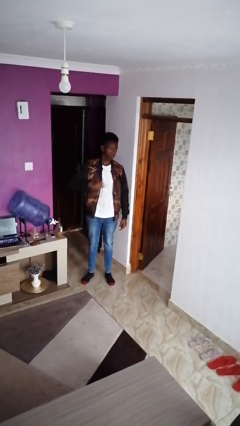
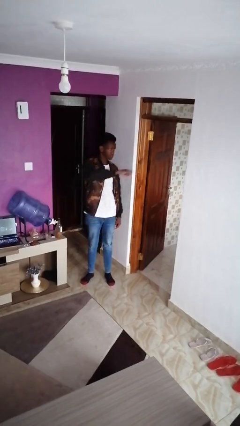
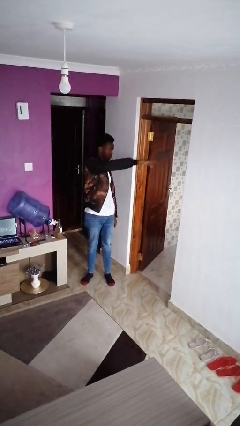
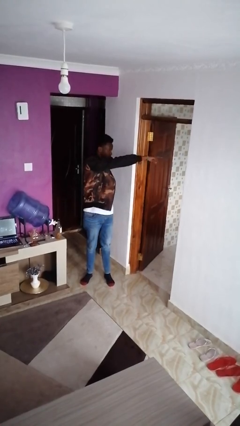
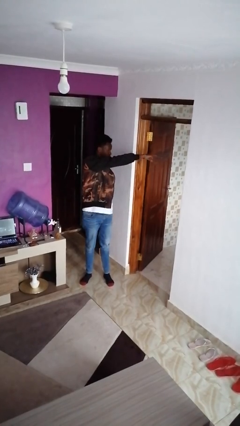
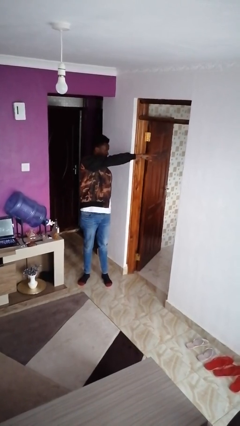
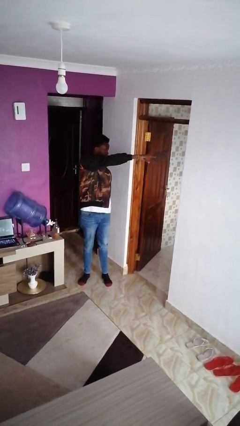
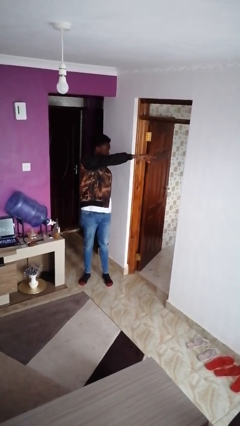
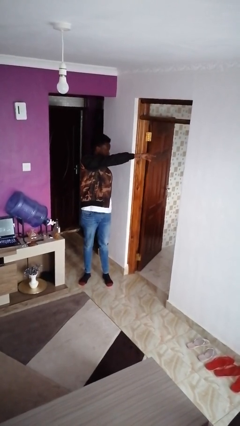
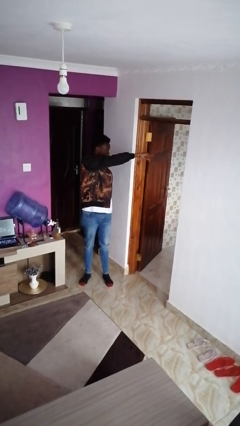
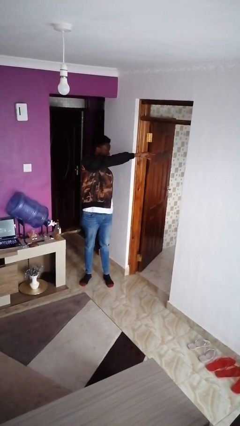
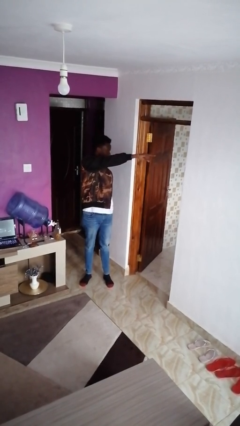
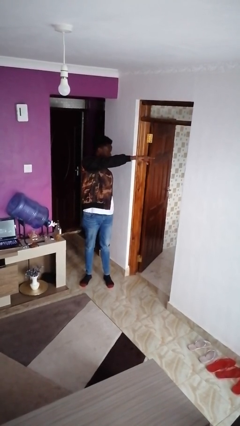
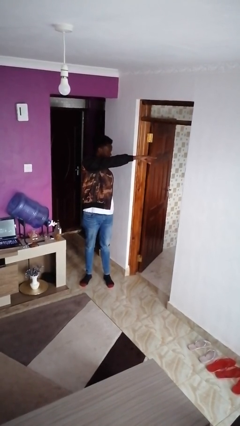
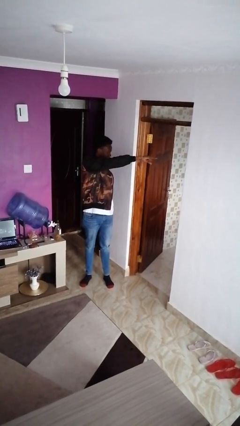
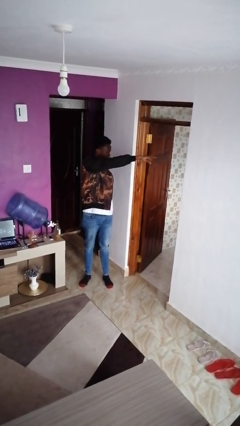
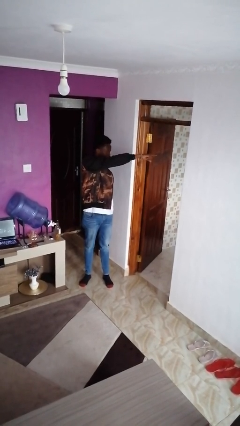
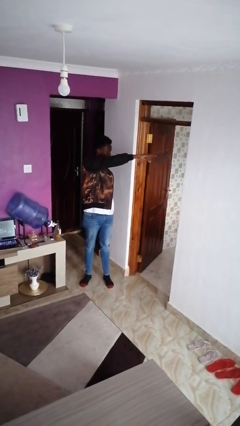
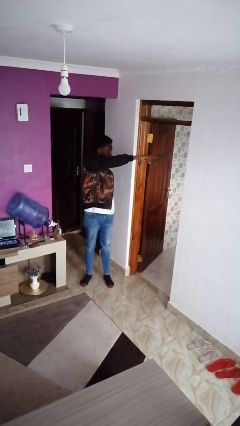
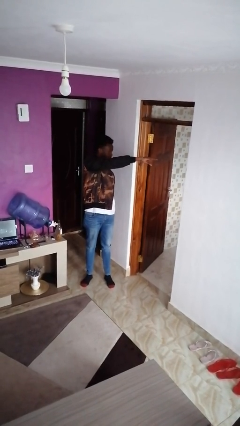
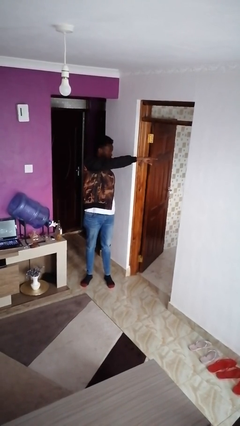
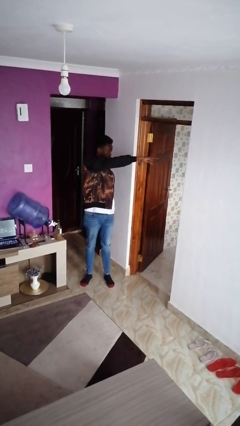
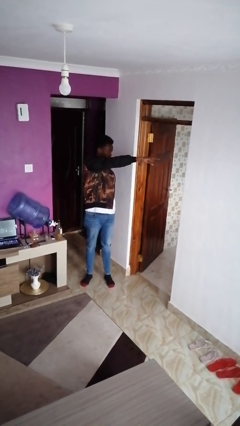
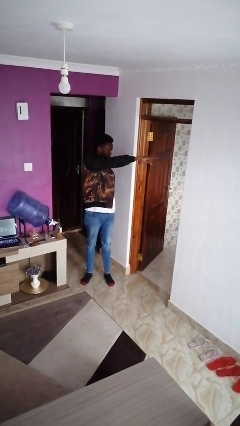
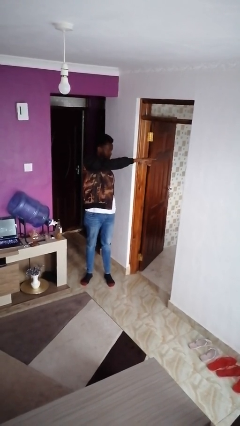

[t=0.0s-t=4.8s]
person points at person

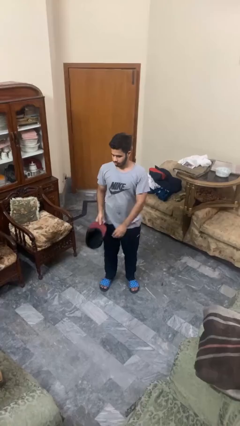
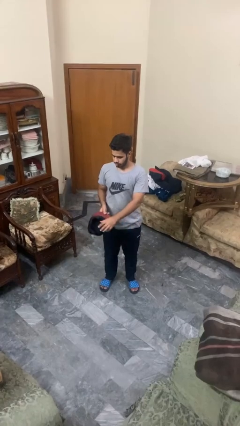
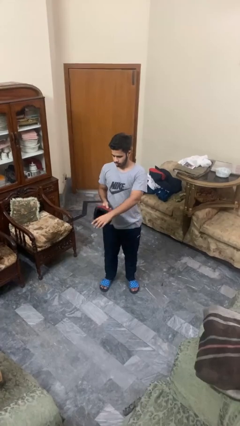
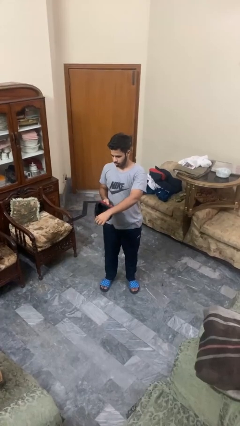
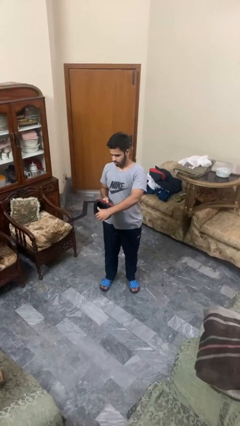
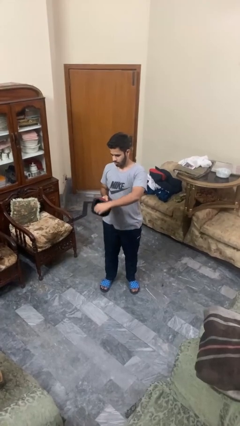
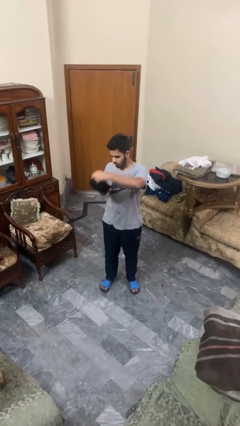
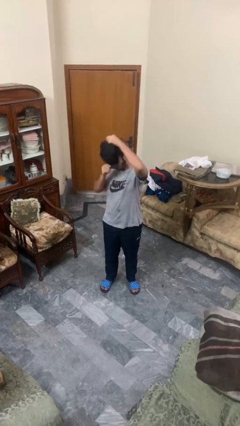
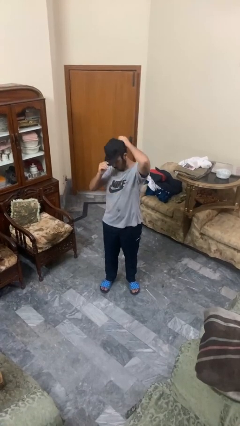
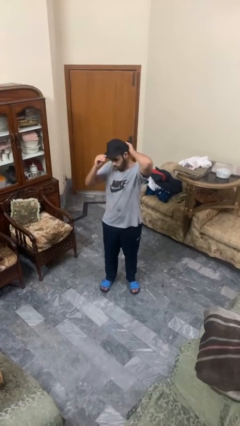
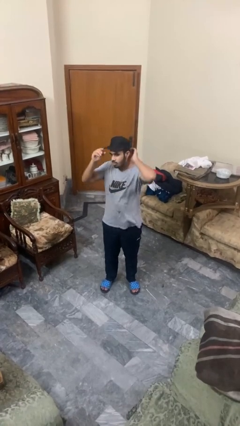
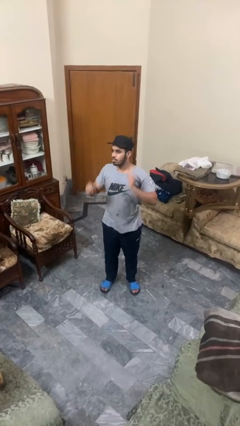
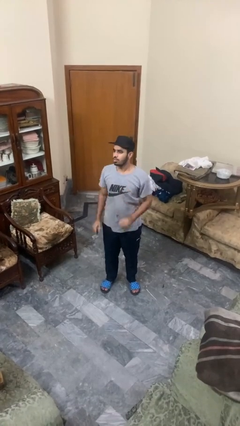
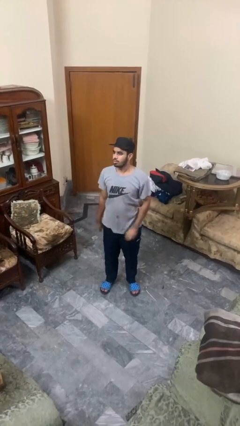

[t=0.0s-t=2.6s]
person puts on hat

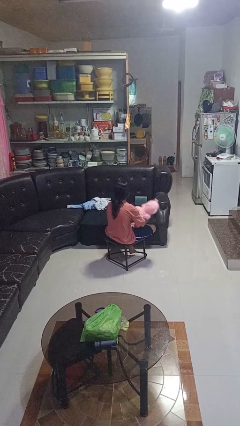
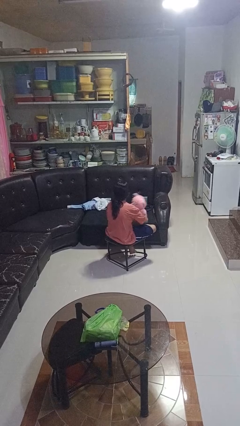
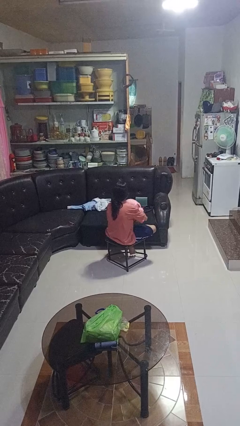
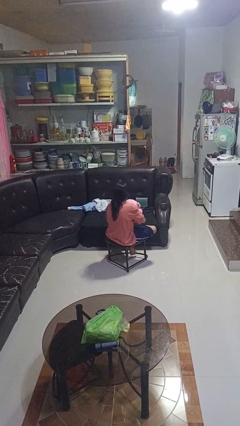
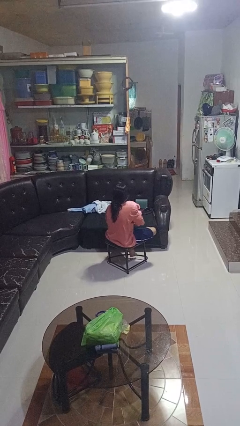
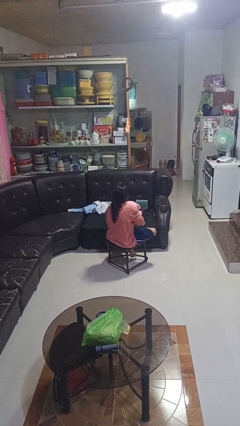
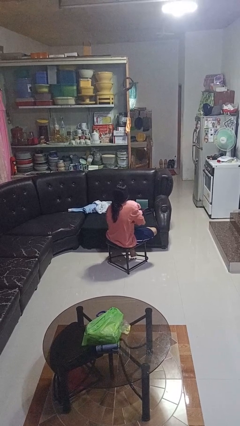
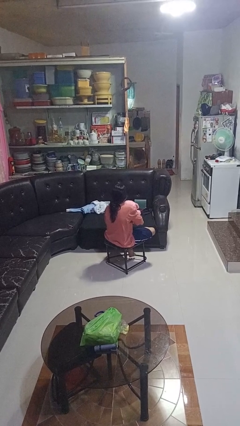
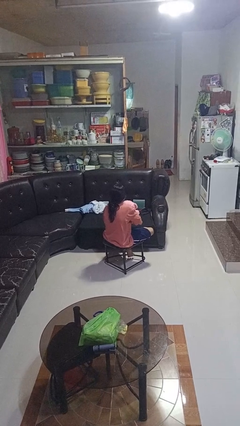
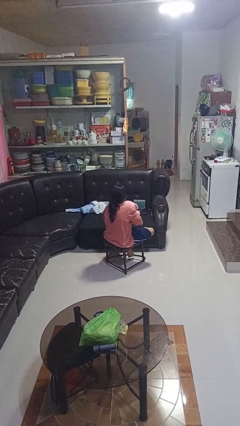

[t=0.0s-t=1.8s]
person hugs stuffed animal

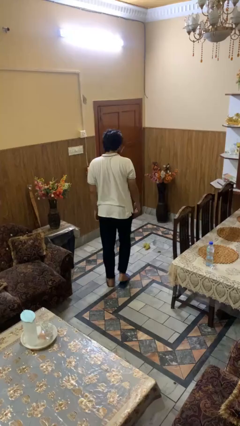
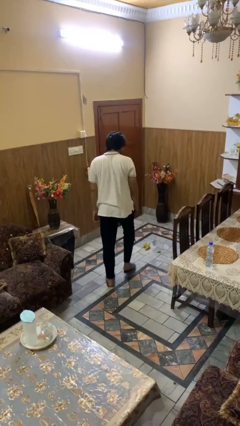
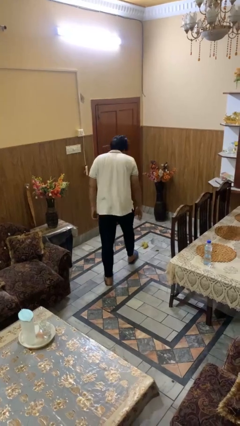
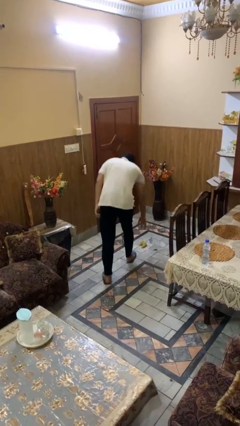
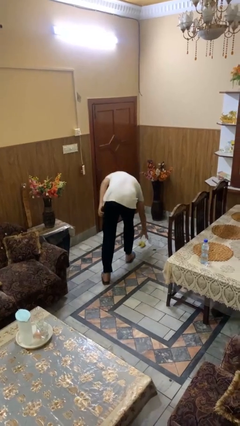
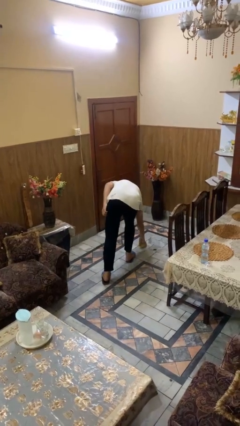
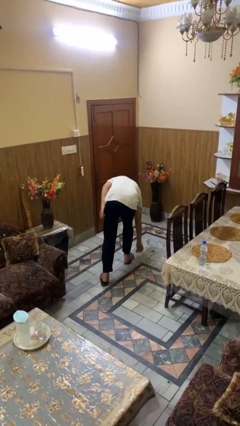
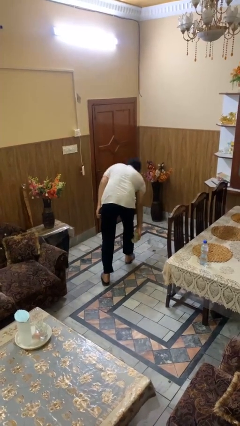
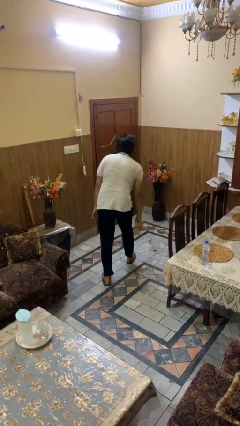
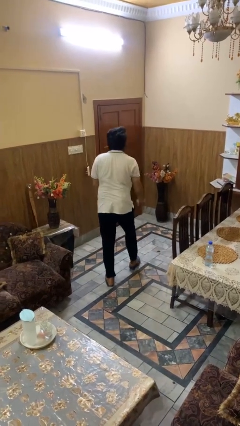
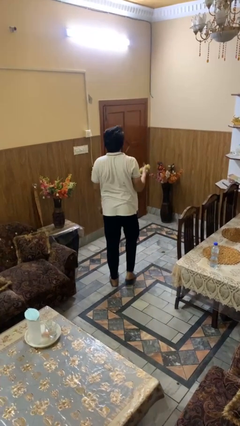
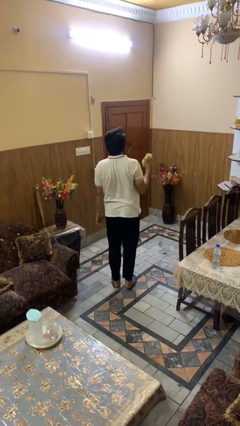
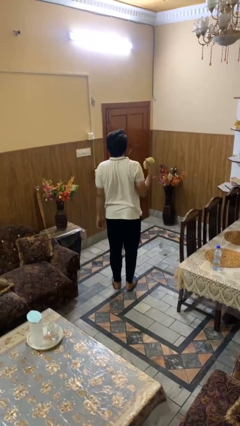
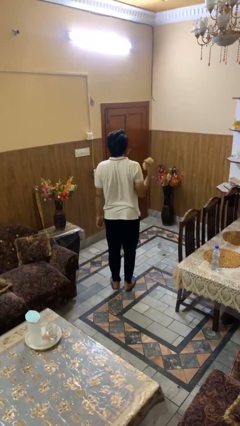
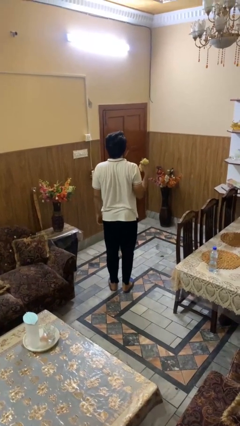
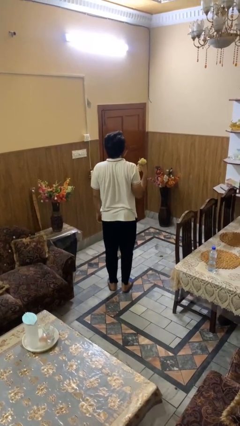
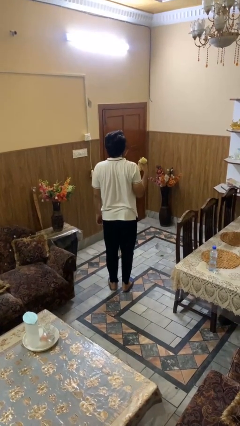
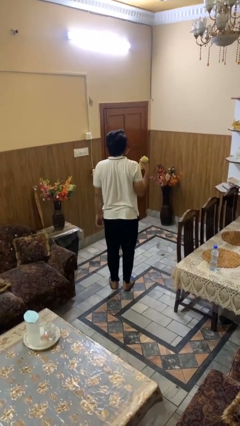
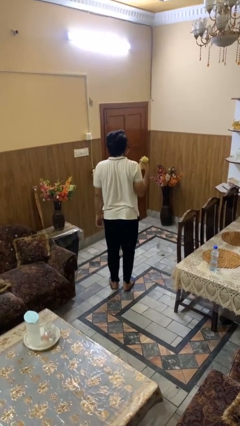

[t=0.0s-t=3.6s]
person picks up object from floor

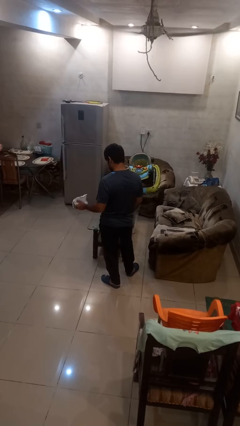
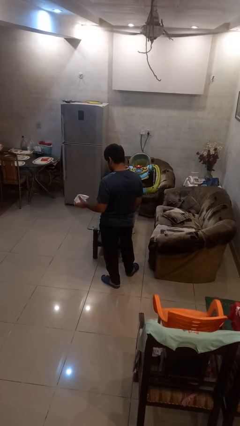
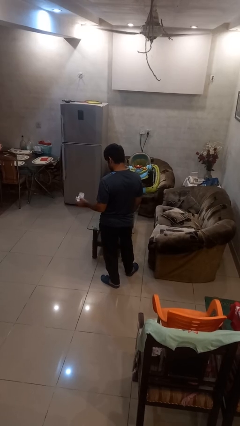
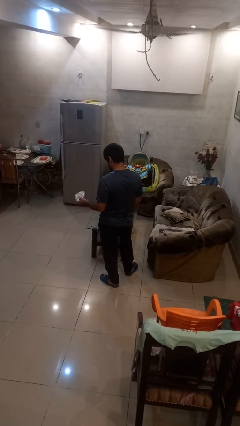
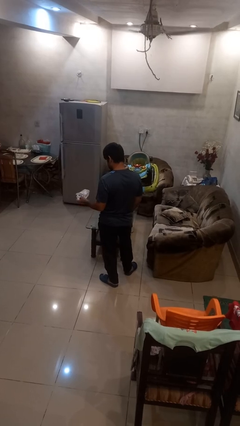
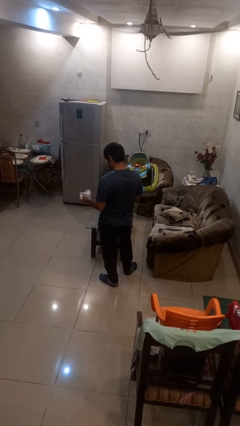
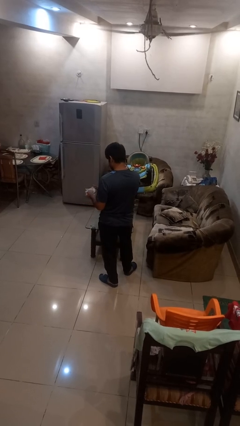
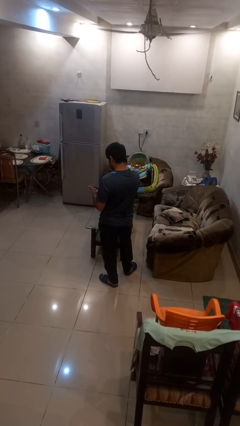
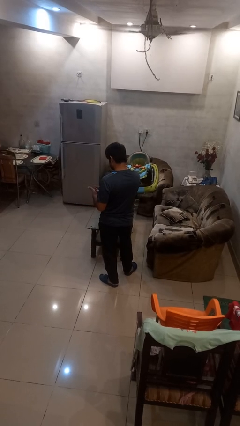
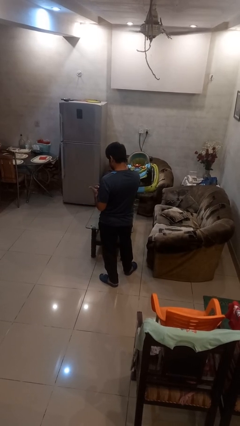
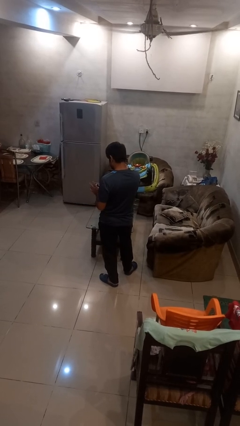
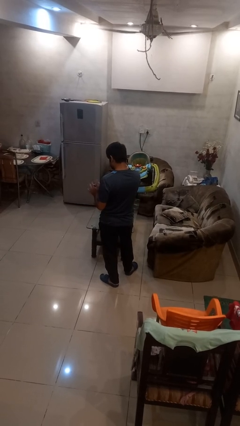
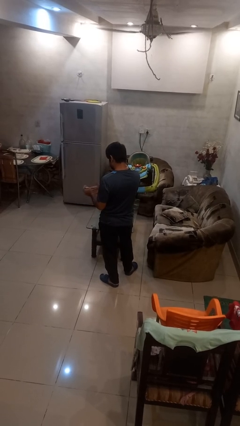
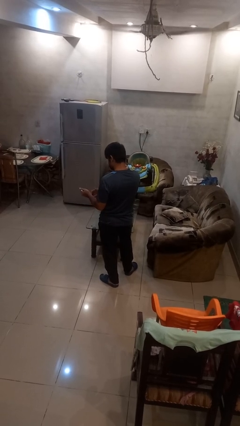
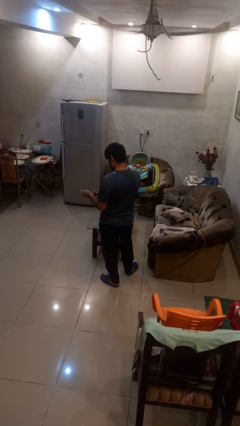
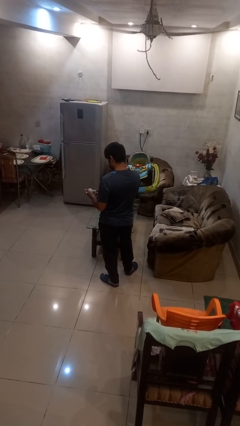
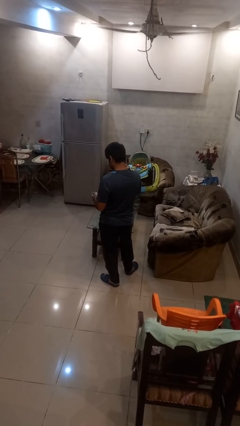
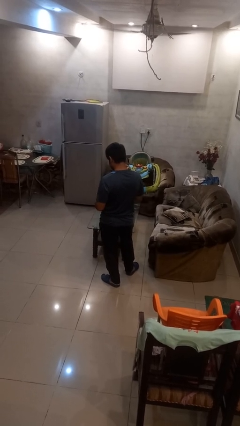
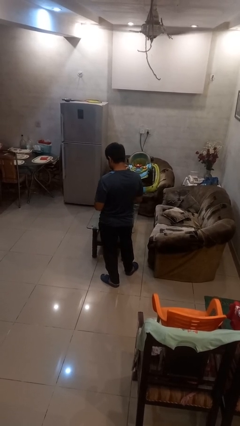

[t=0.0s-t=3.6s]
person crumples paper

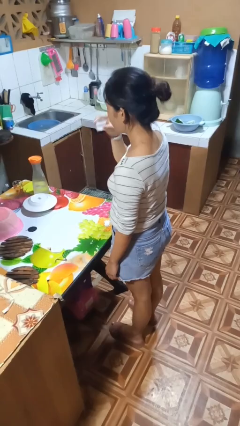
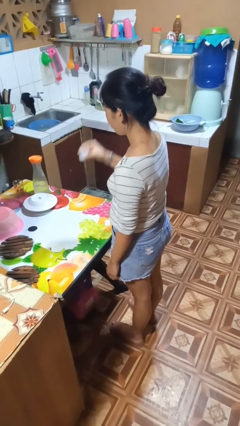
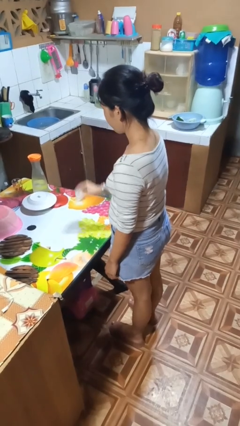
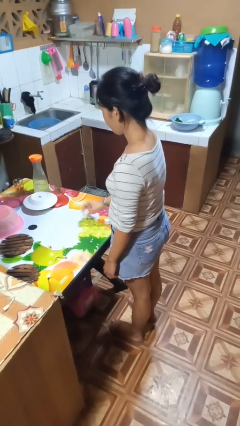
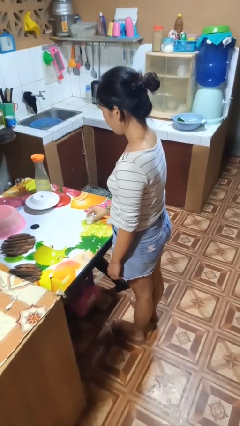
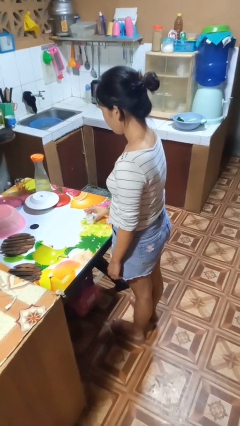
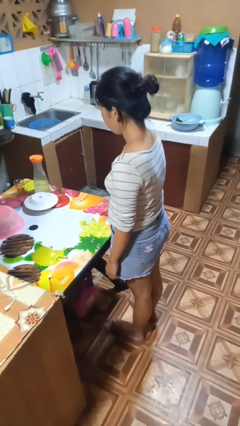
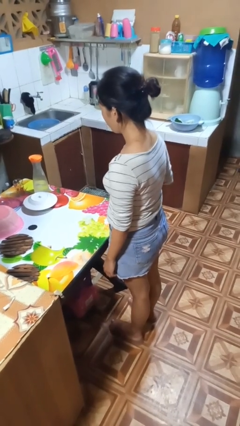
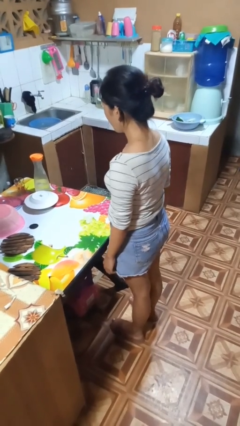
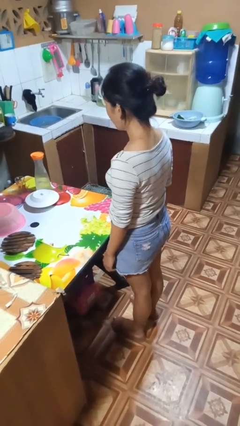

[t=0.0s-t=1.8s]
person puts down object on table
